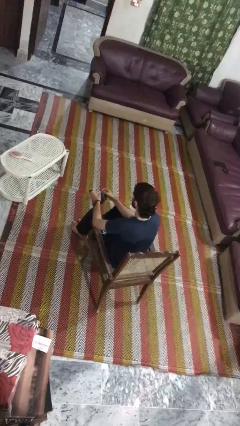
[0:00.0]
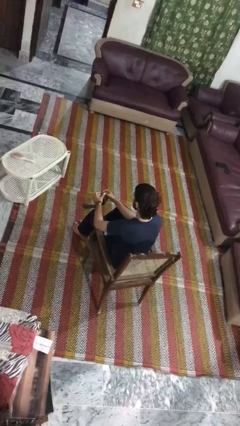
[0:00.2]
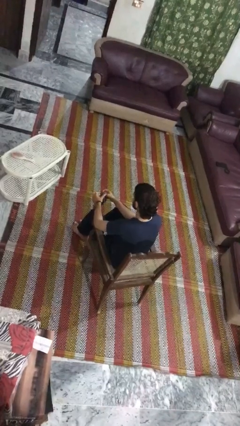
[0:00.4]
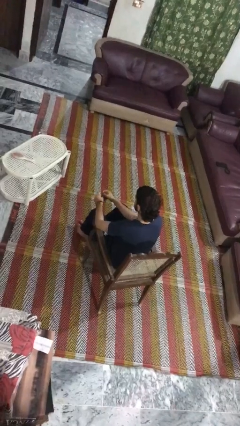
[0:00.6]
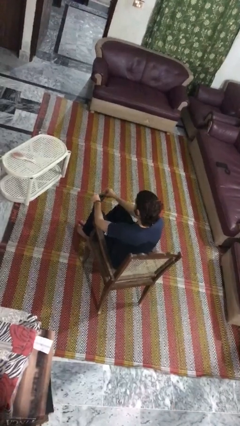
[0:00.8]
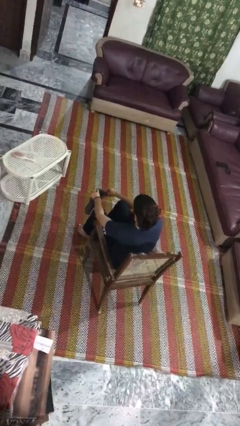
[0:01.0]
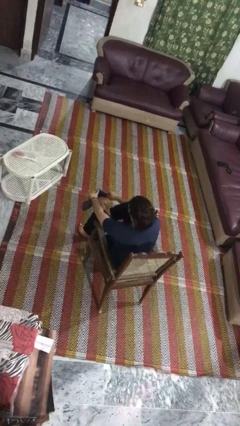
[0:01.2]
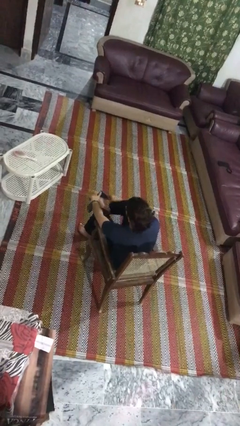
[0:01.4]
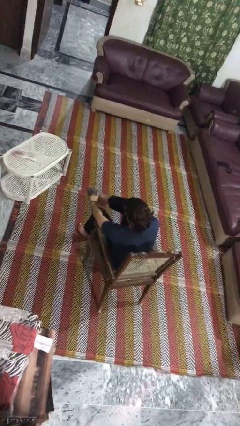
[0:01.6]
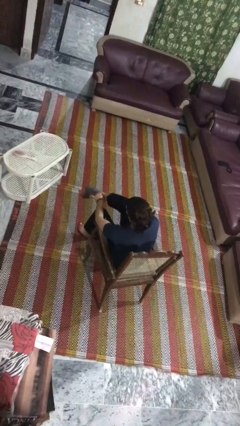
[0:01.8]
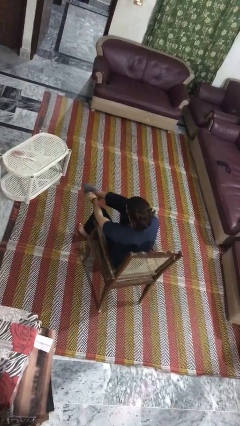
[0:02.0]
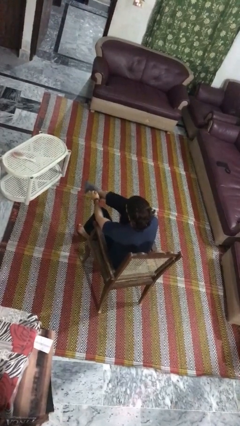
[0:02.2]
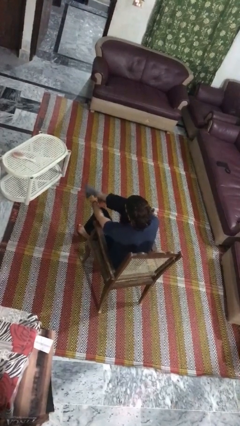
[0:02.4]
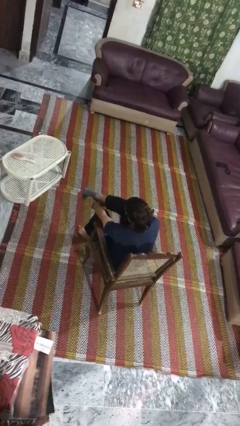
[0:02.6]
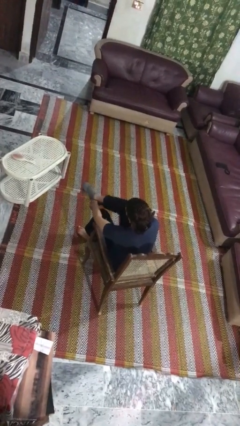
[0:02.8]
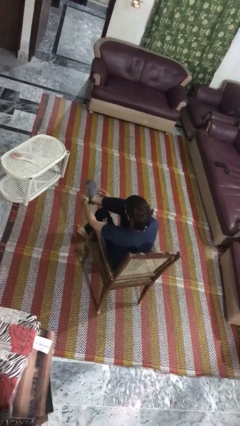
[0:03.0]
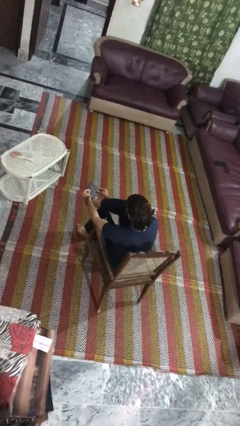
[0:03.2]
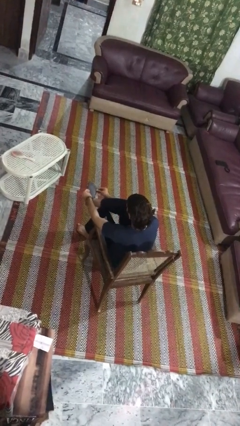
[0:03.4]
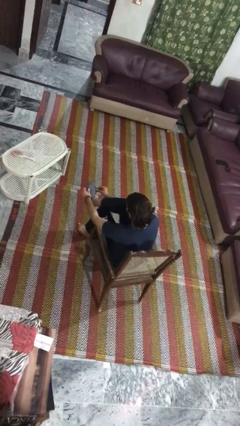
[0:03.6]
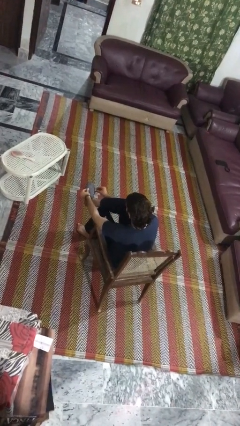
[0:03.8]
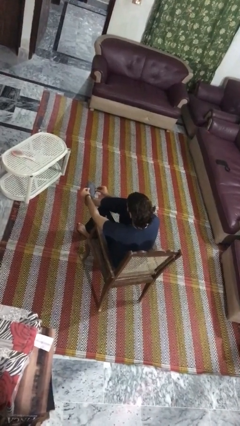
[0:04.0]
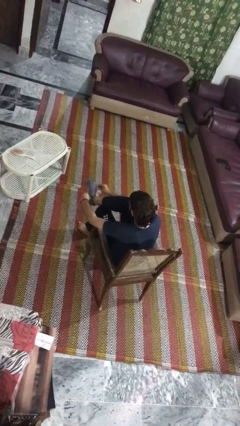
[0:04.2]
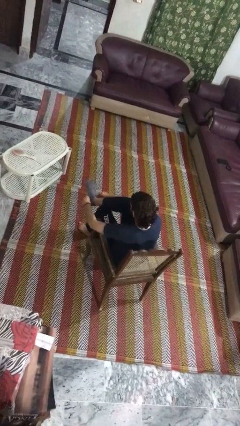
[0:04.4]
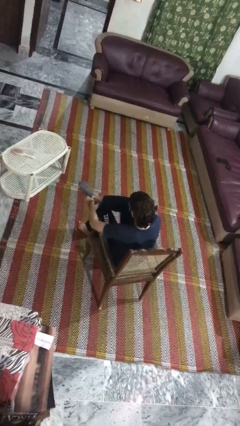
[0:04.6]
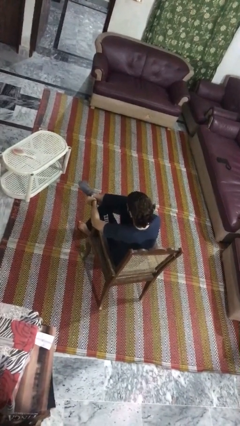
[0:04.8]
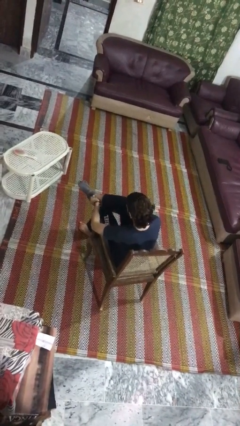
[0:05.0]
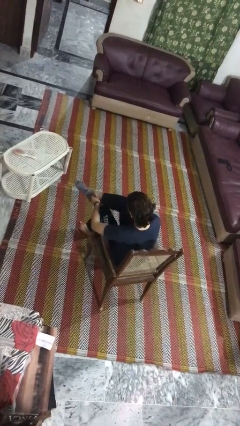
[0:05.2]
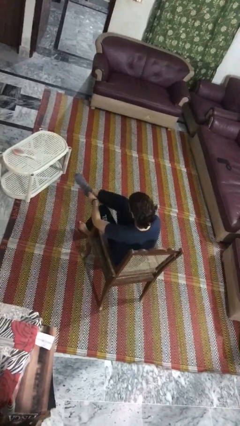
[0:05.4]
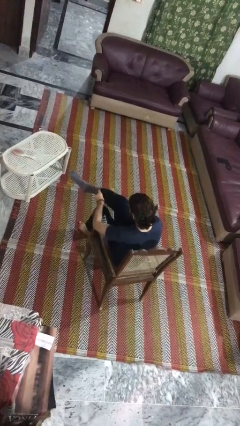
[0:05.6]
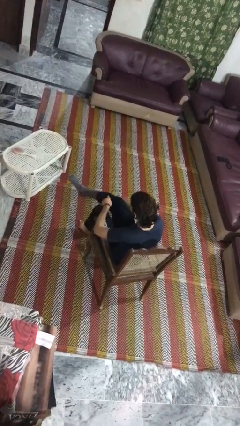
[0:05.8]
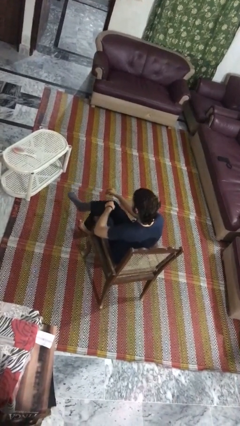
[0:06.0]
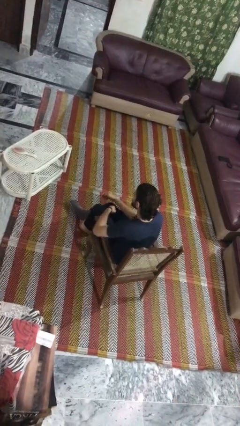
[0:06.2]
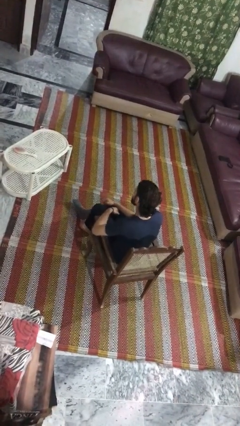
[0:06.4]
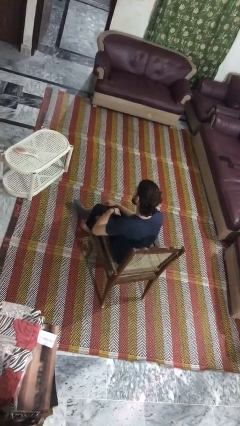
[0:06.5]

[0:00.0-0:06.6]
person puts on socks

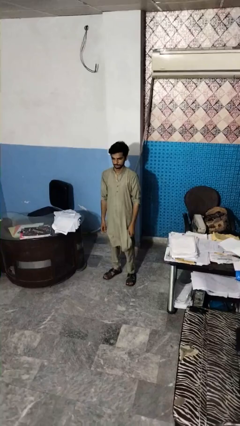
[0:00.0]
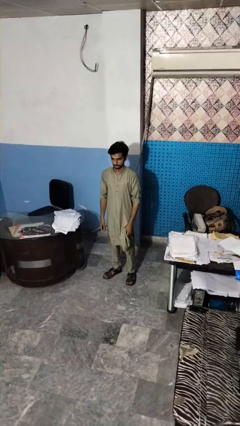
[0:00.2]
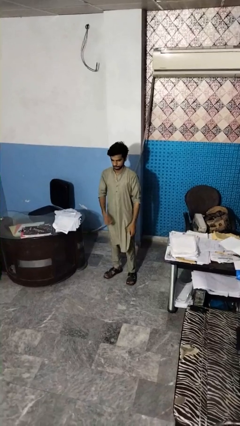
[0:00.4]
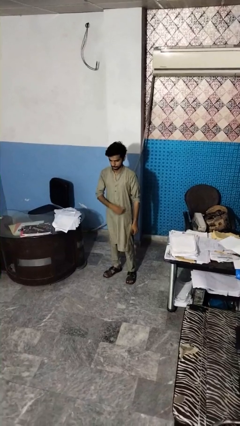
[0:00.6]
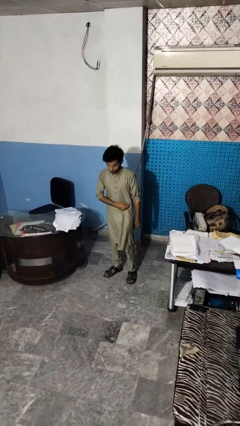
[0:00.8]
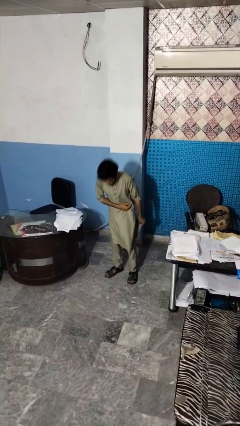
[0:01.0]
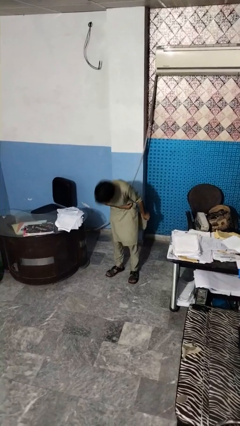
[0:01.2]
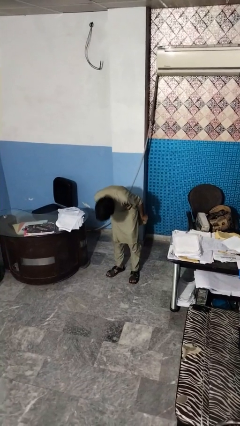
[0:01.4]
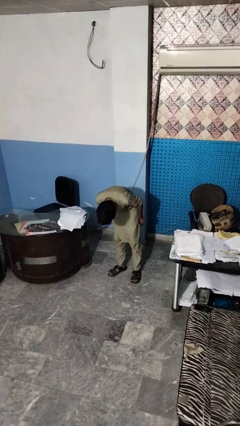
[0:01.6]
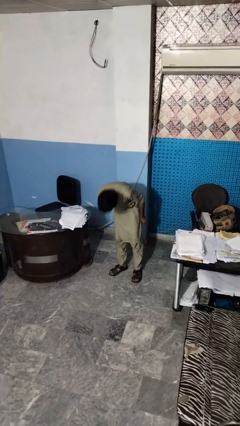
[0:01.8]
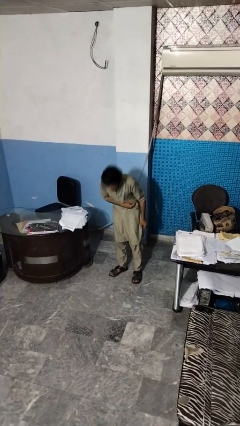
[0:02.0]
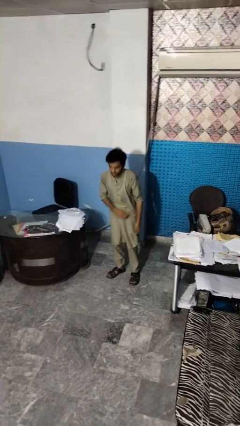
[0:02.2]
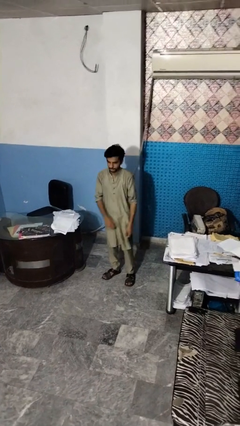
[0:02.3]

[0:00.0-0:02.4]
person bows

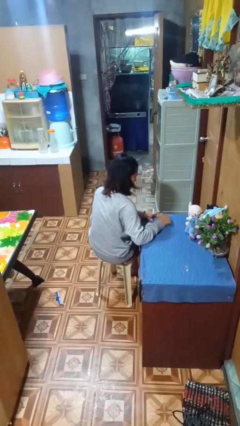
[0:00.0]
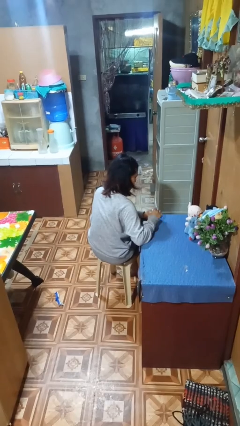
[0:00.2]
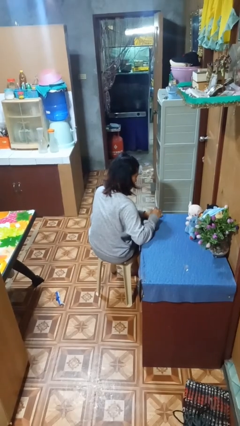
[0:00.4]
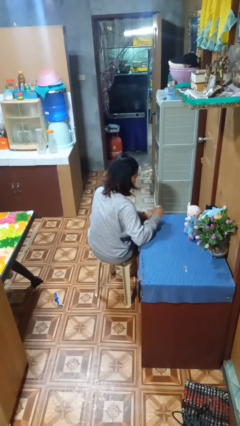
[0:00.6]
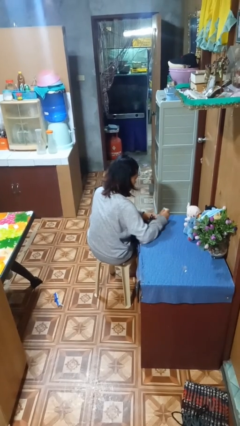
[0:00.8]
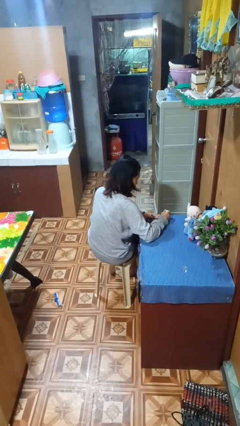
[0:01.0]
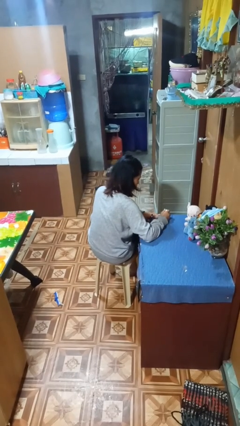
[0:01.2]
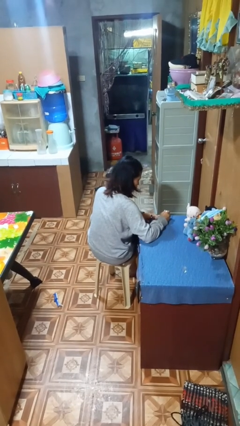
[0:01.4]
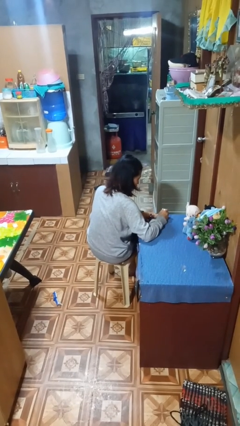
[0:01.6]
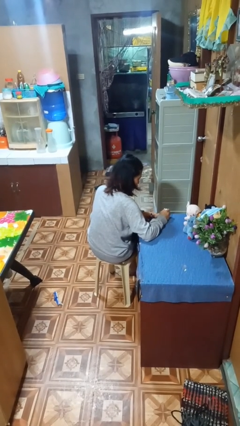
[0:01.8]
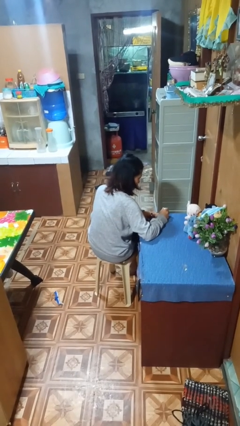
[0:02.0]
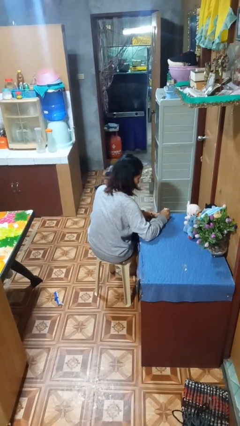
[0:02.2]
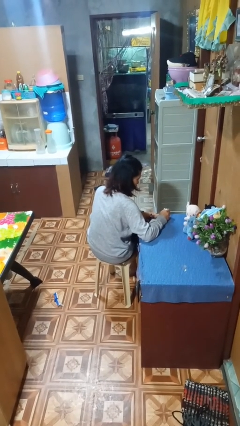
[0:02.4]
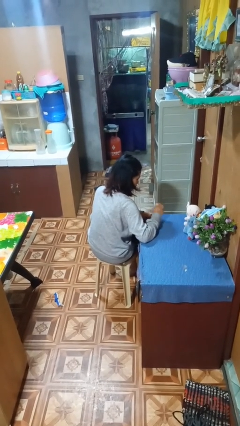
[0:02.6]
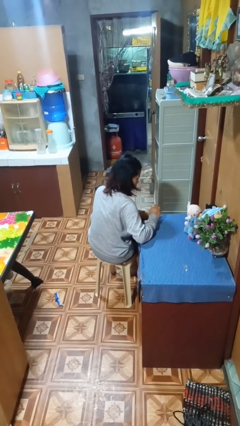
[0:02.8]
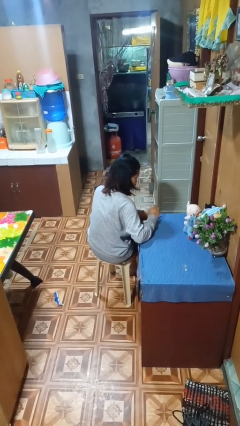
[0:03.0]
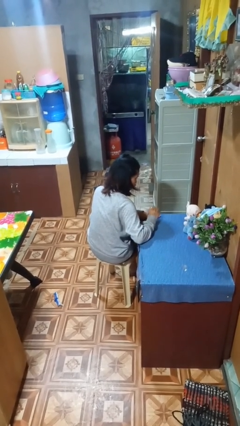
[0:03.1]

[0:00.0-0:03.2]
person paints fingernails

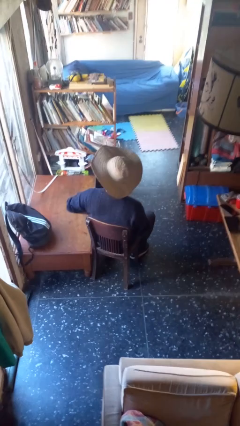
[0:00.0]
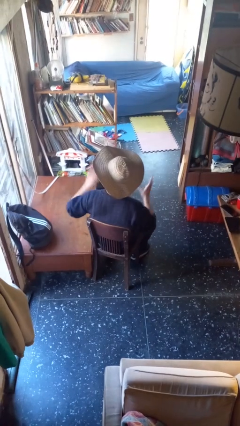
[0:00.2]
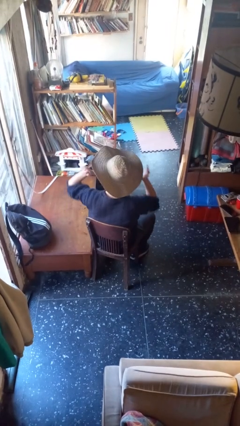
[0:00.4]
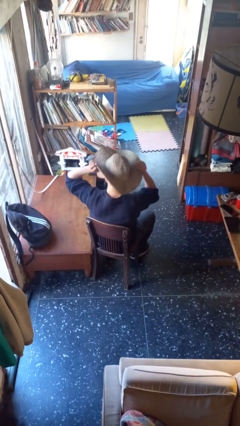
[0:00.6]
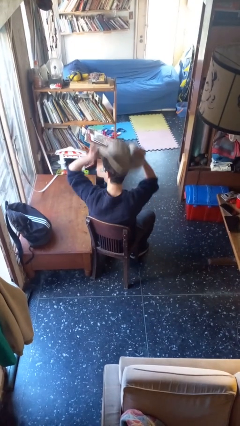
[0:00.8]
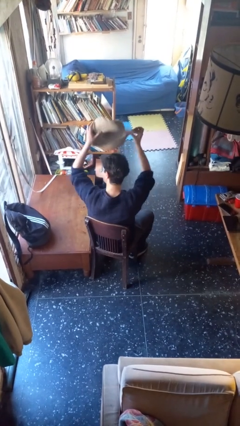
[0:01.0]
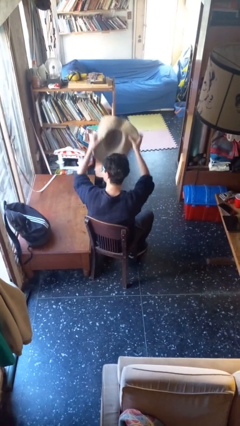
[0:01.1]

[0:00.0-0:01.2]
person takes off hat

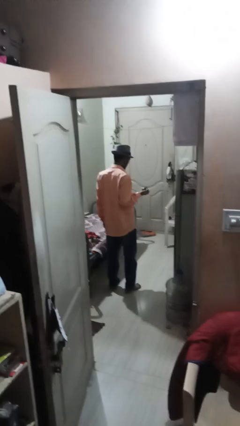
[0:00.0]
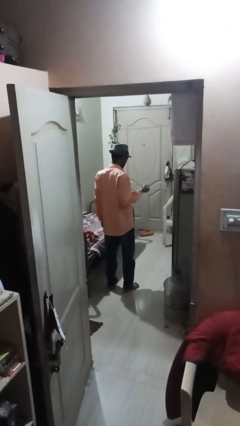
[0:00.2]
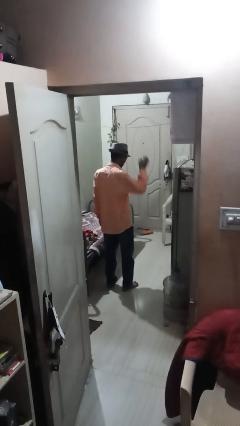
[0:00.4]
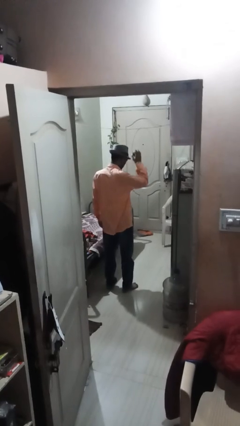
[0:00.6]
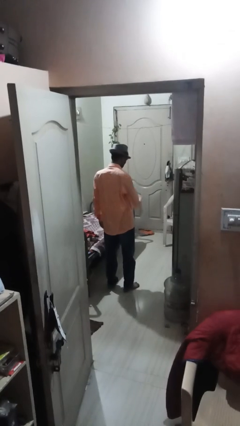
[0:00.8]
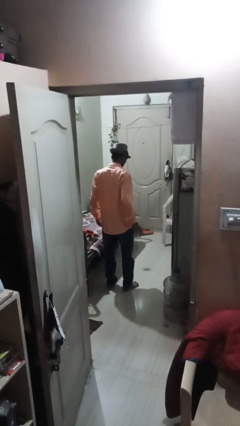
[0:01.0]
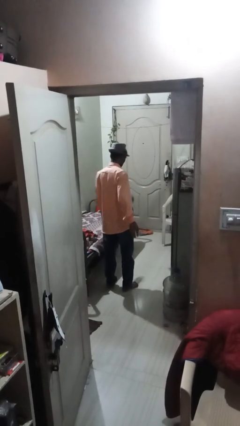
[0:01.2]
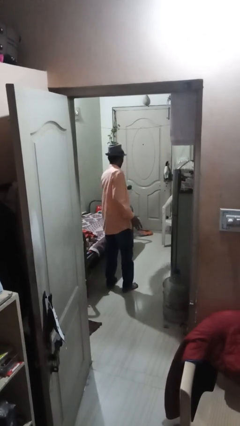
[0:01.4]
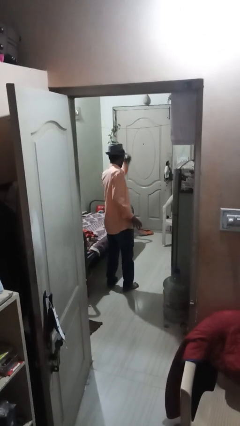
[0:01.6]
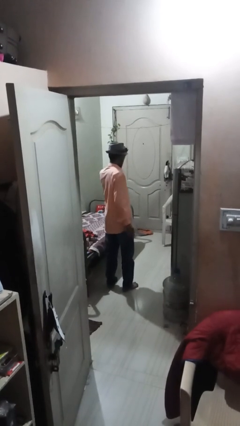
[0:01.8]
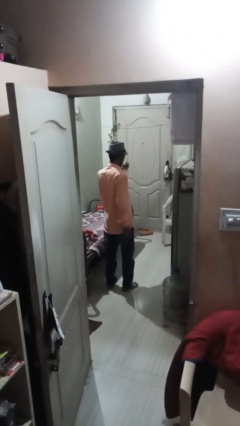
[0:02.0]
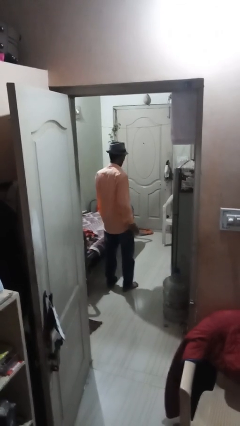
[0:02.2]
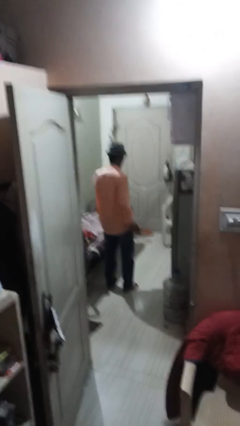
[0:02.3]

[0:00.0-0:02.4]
person bounces ball on floor

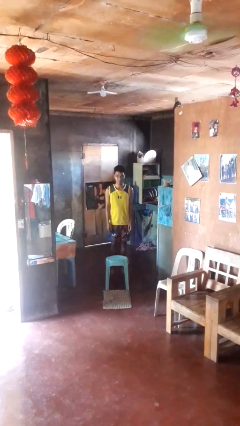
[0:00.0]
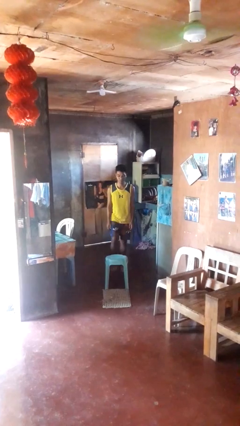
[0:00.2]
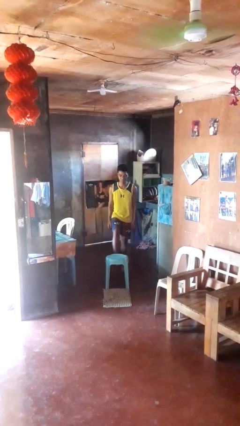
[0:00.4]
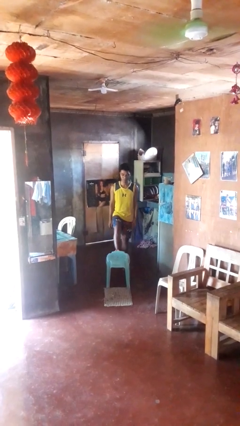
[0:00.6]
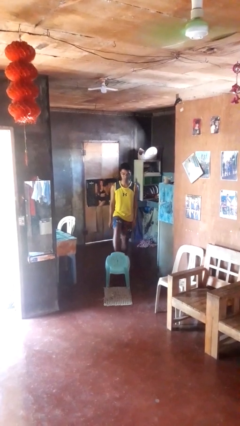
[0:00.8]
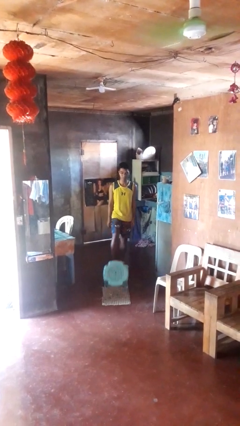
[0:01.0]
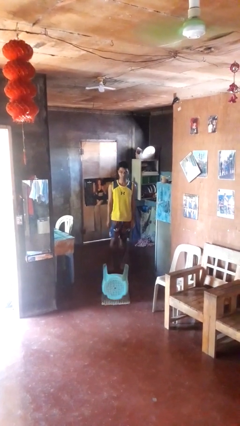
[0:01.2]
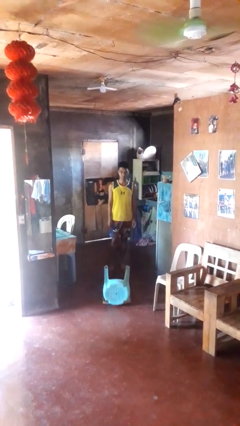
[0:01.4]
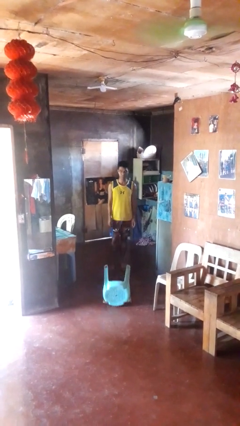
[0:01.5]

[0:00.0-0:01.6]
person knocks over furniture
